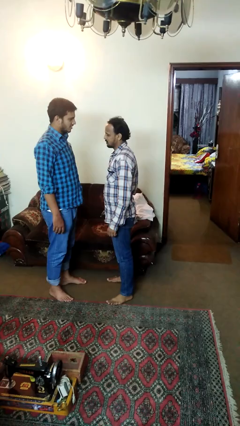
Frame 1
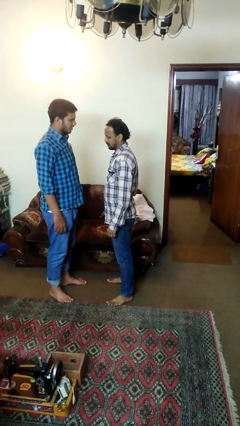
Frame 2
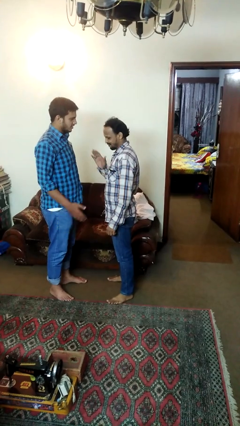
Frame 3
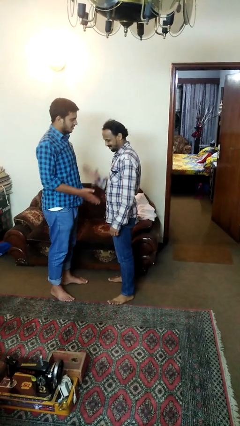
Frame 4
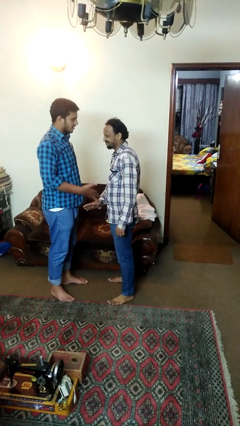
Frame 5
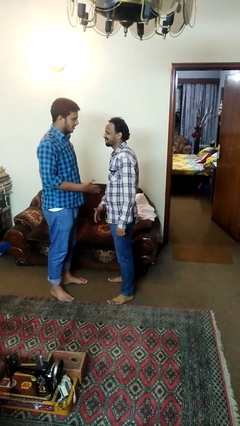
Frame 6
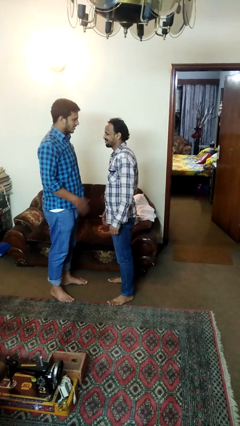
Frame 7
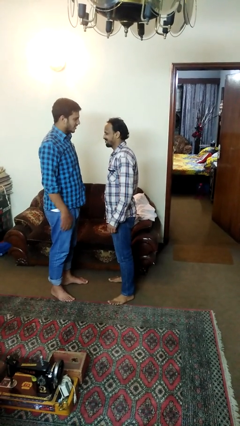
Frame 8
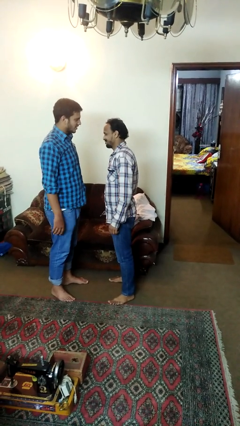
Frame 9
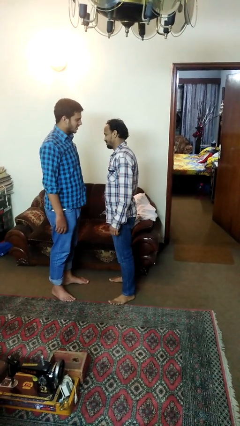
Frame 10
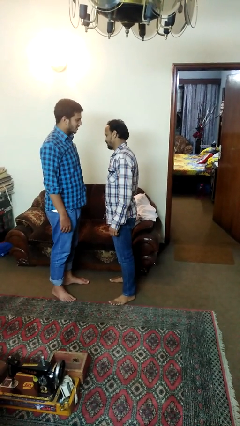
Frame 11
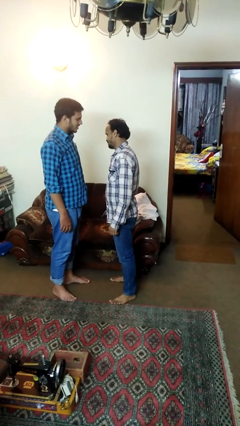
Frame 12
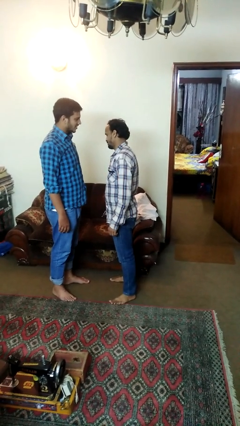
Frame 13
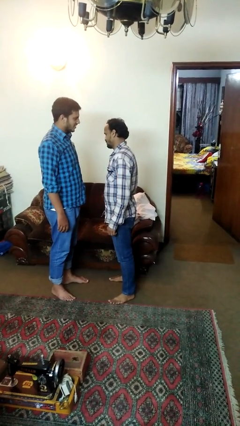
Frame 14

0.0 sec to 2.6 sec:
person highfives hand

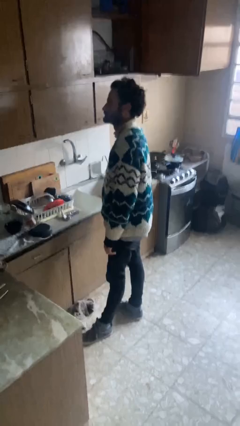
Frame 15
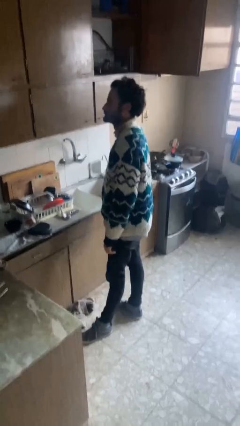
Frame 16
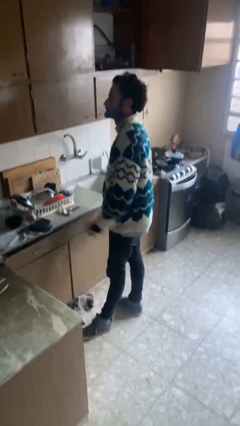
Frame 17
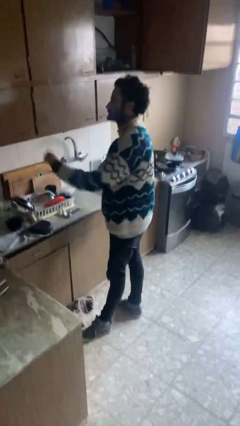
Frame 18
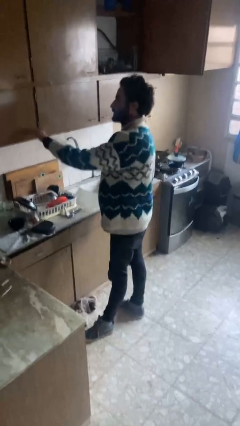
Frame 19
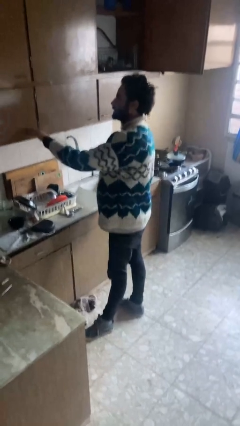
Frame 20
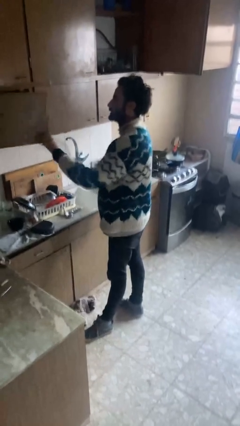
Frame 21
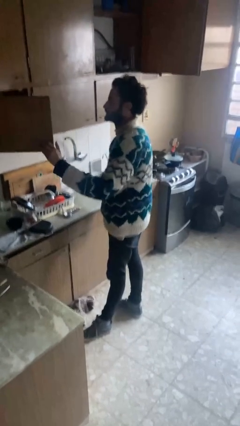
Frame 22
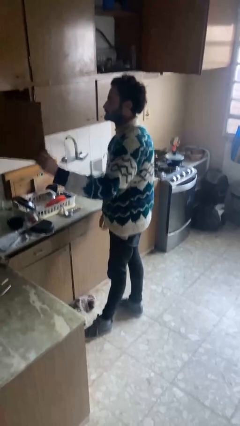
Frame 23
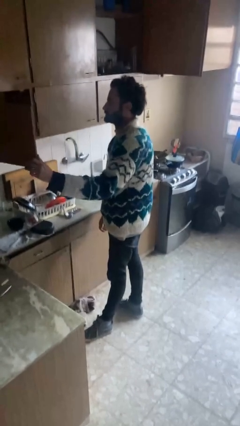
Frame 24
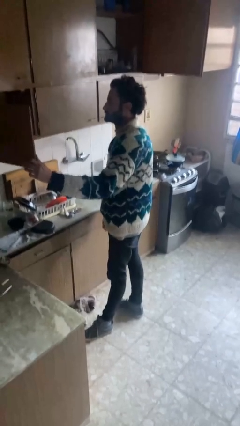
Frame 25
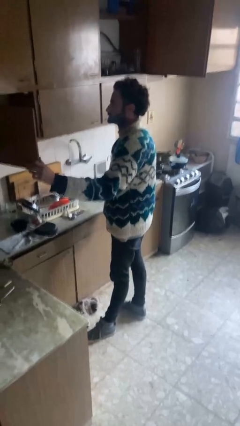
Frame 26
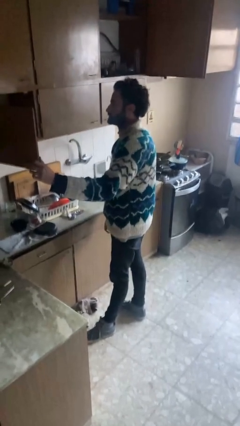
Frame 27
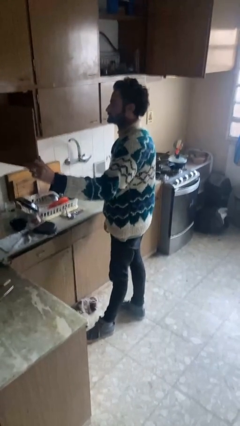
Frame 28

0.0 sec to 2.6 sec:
person opens cabinet

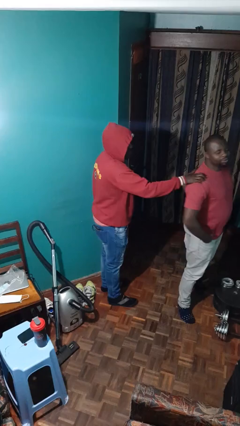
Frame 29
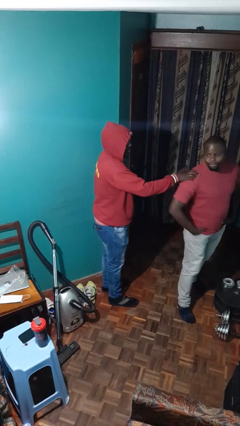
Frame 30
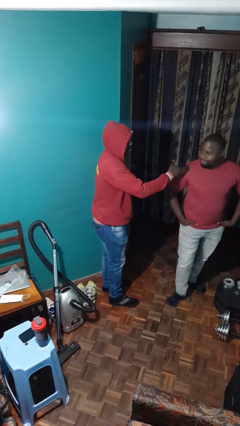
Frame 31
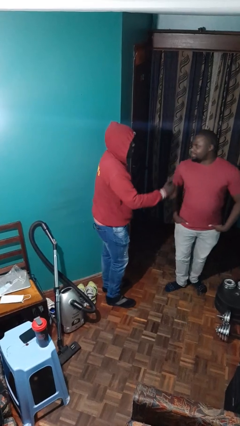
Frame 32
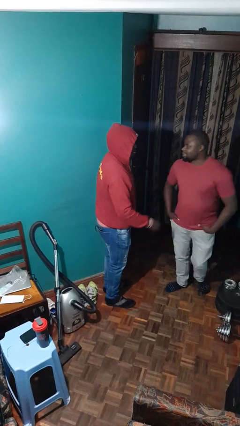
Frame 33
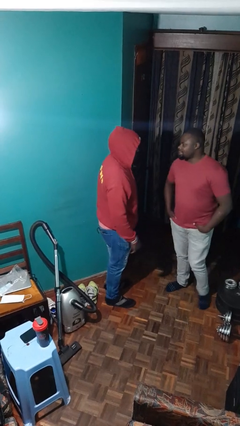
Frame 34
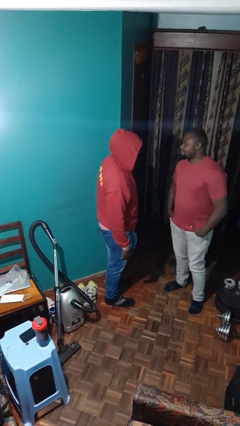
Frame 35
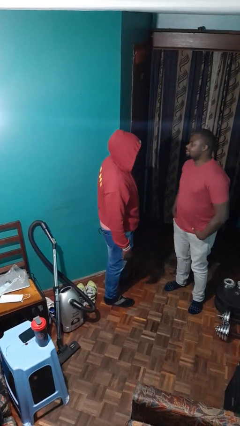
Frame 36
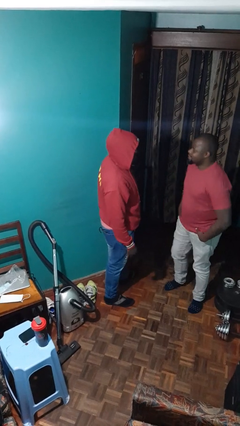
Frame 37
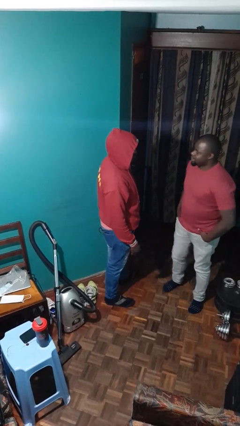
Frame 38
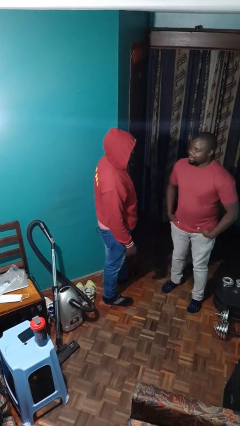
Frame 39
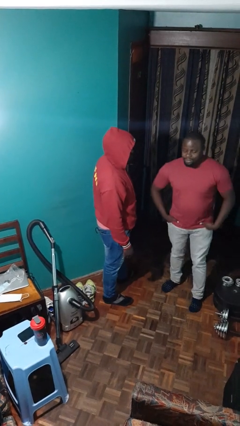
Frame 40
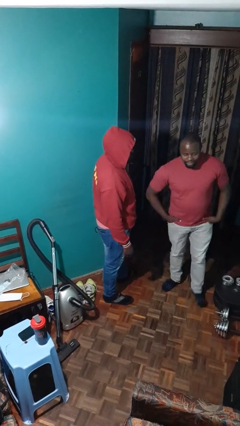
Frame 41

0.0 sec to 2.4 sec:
person spins person around

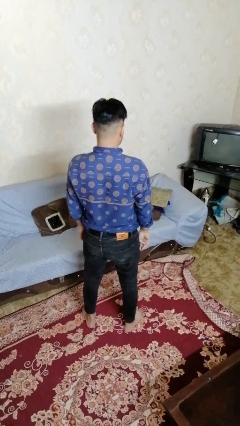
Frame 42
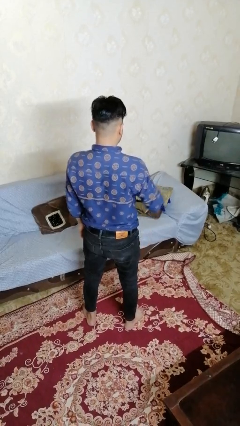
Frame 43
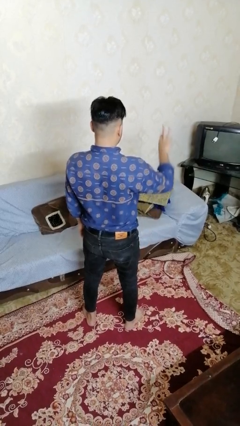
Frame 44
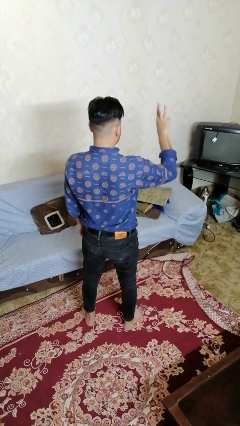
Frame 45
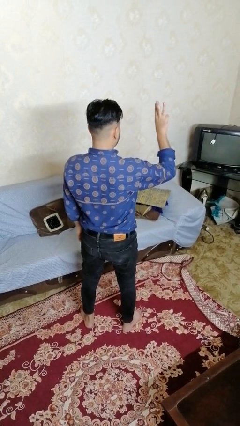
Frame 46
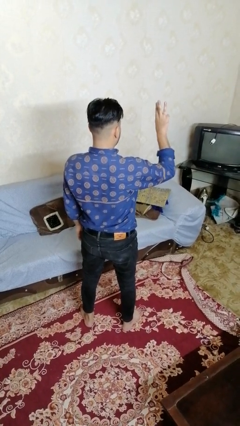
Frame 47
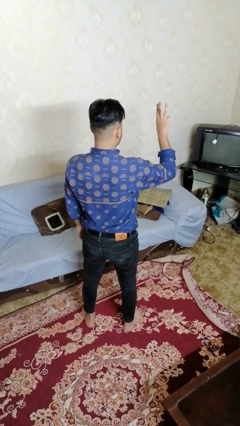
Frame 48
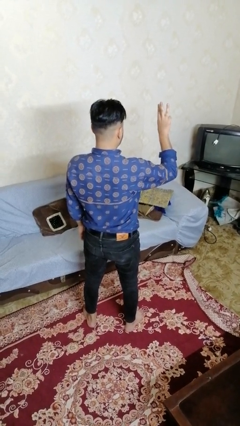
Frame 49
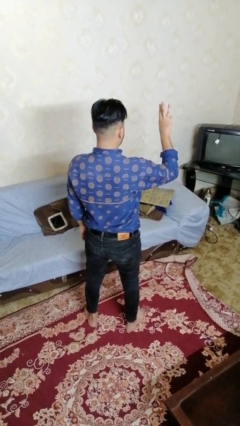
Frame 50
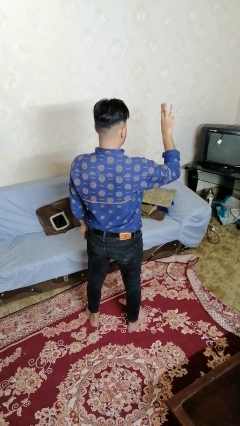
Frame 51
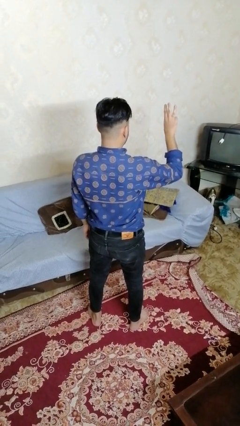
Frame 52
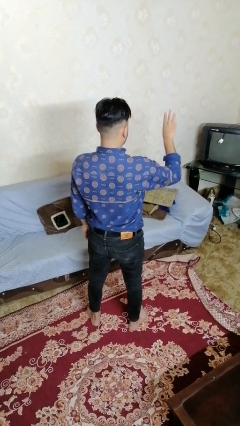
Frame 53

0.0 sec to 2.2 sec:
person gestures number three

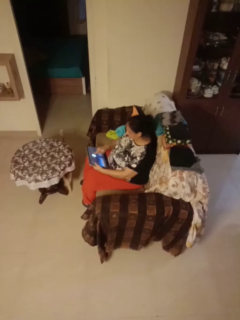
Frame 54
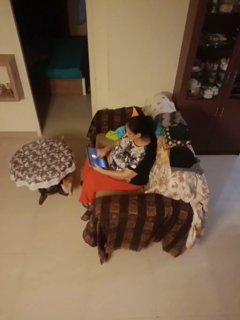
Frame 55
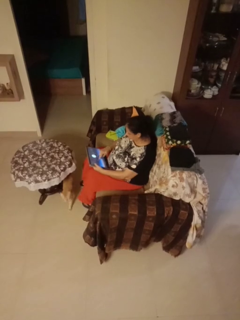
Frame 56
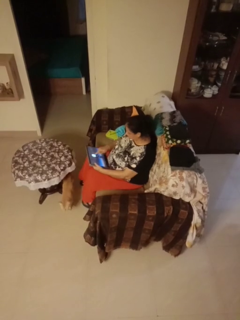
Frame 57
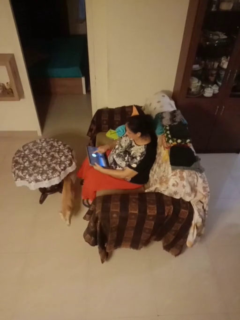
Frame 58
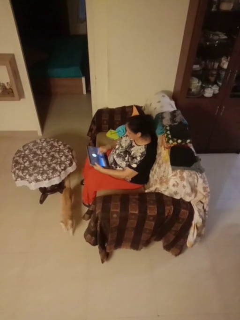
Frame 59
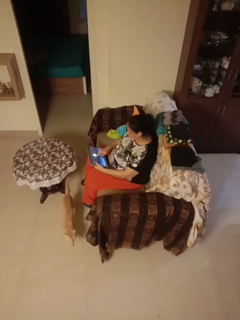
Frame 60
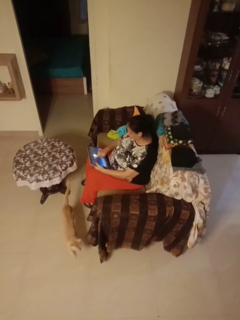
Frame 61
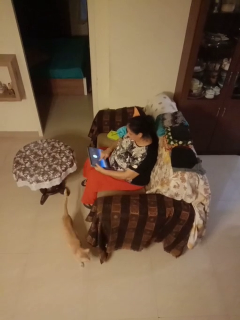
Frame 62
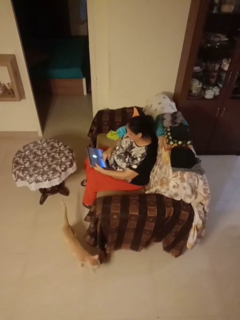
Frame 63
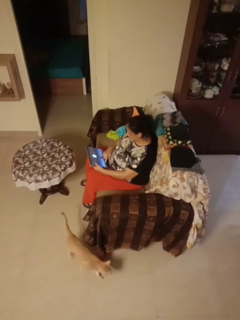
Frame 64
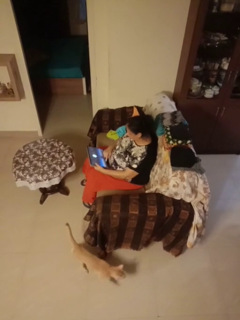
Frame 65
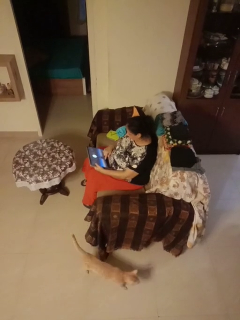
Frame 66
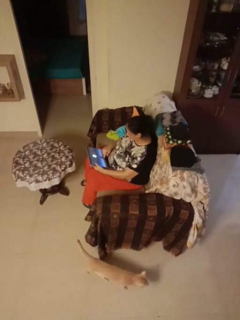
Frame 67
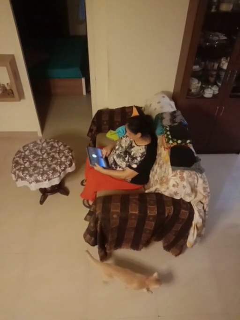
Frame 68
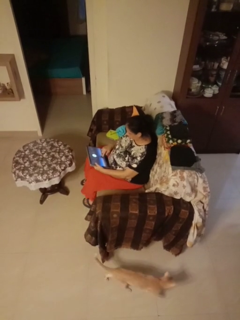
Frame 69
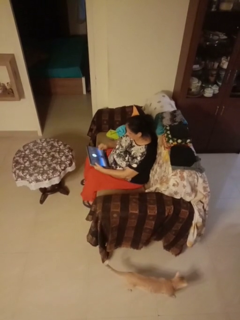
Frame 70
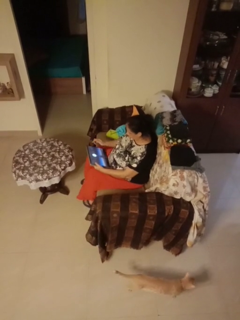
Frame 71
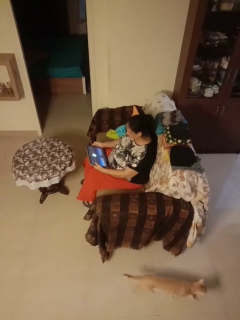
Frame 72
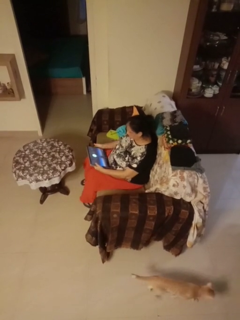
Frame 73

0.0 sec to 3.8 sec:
person interacts with tablet

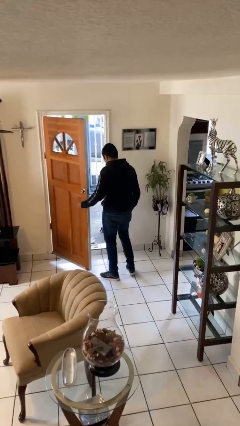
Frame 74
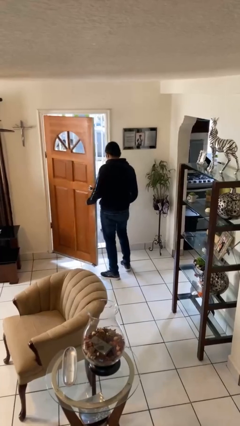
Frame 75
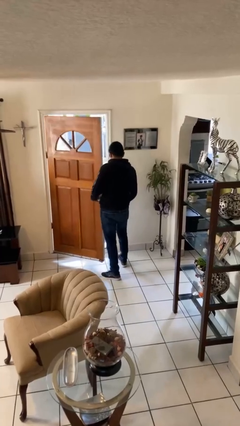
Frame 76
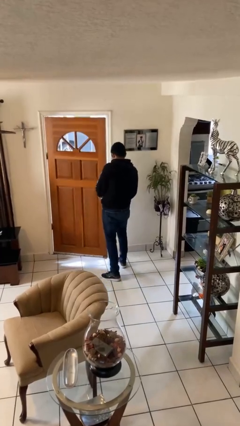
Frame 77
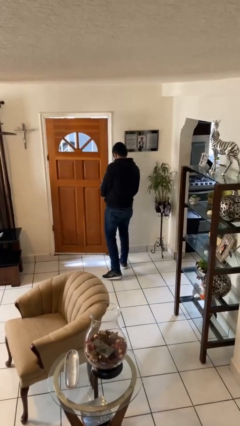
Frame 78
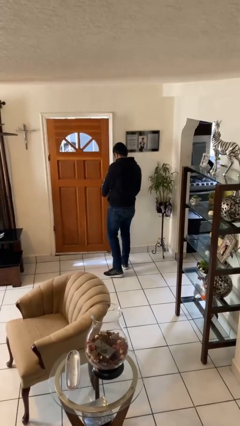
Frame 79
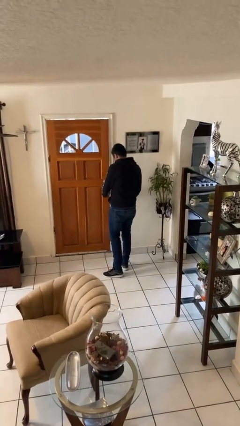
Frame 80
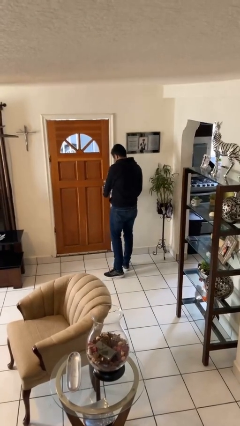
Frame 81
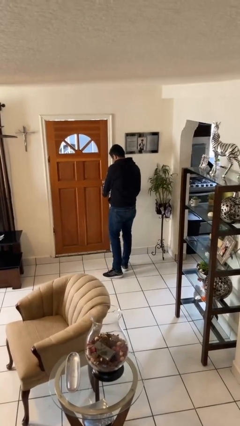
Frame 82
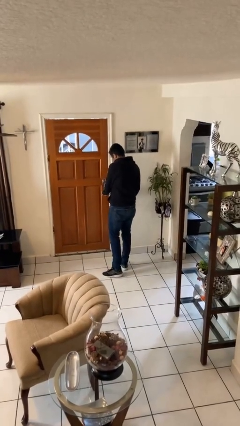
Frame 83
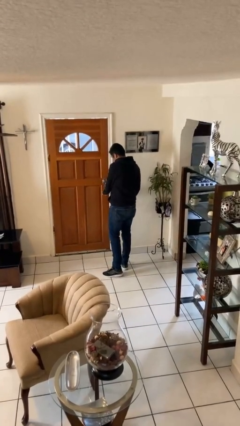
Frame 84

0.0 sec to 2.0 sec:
person closes facility door

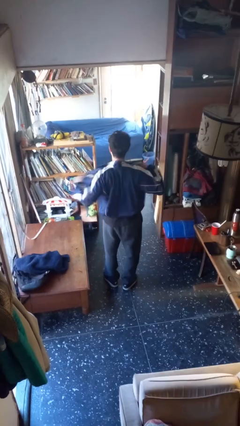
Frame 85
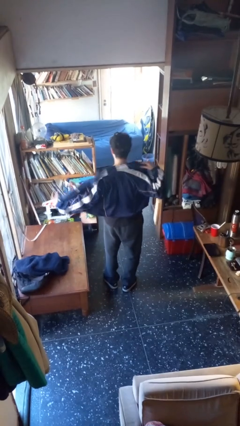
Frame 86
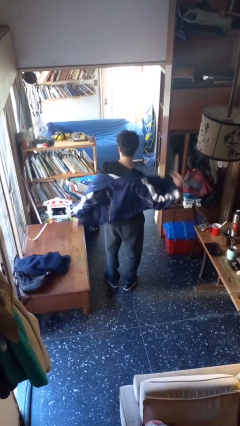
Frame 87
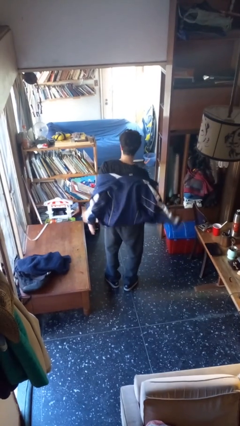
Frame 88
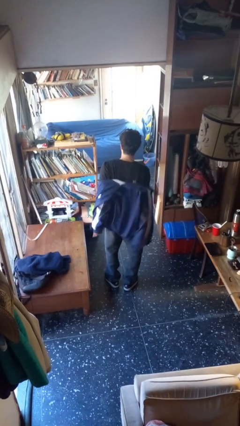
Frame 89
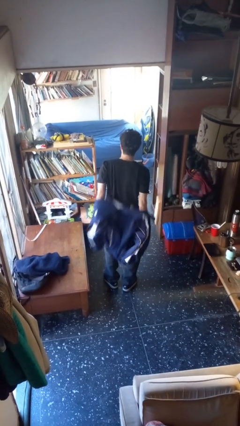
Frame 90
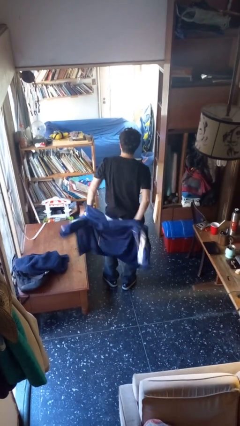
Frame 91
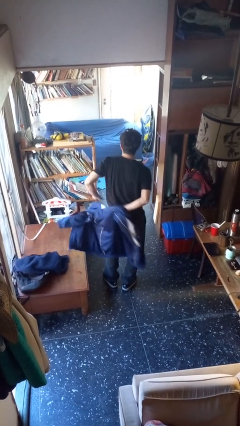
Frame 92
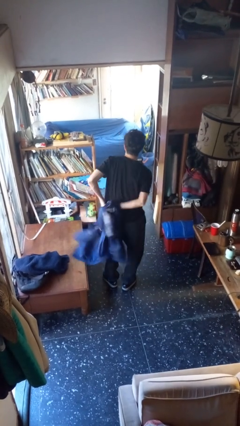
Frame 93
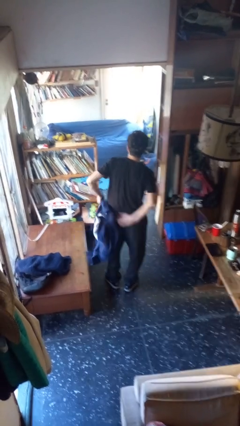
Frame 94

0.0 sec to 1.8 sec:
person takes off jacket

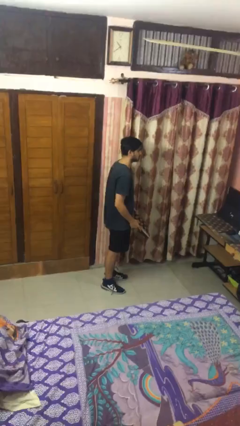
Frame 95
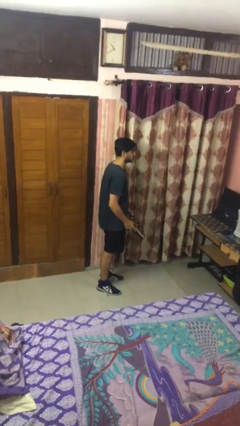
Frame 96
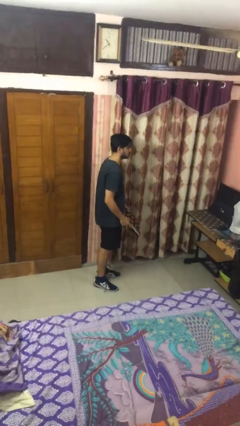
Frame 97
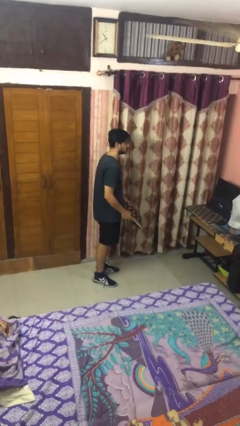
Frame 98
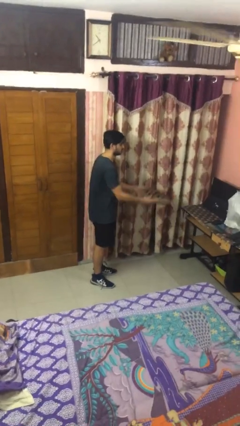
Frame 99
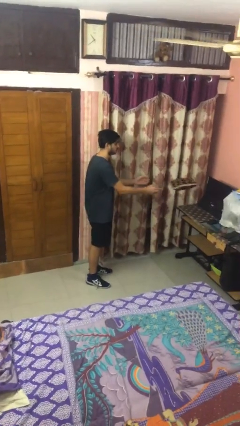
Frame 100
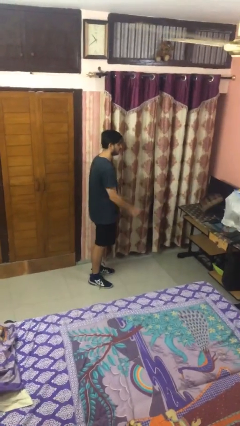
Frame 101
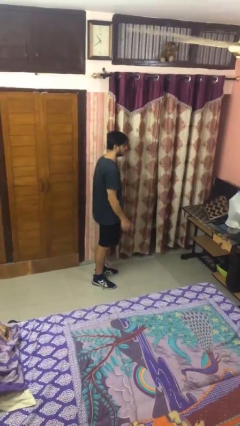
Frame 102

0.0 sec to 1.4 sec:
person throws object on table
